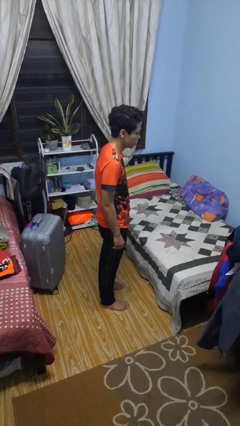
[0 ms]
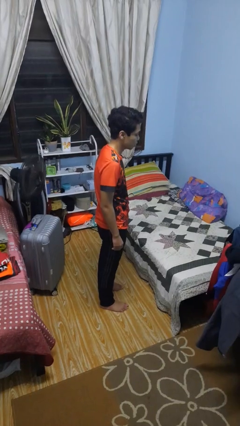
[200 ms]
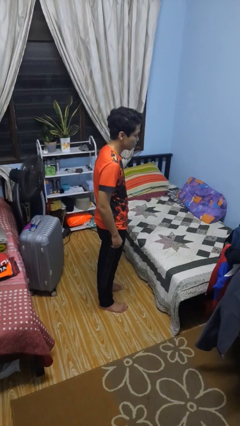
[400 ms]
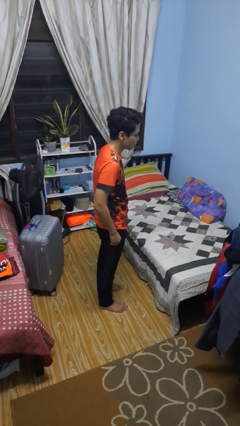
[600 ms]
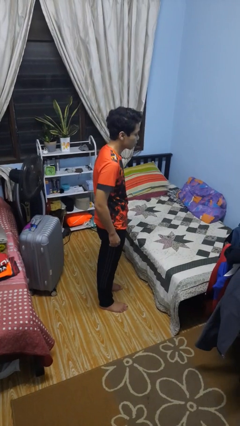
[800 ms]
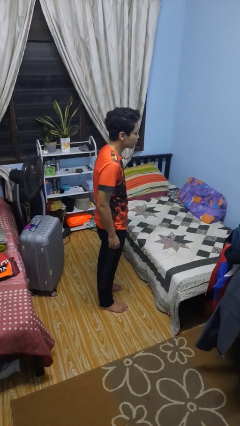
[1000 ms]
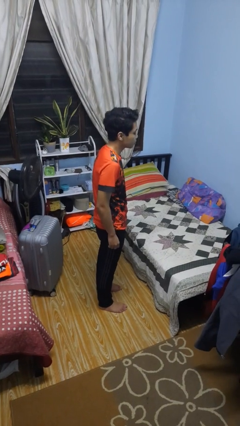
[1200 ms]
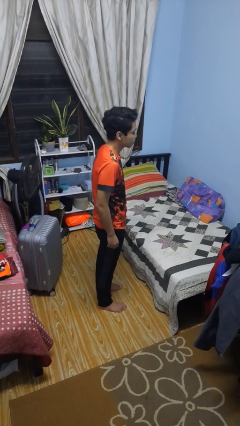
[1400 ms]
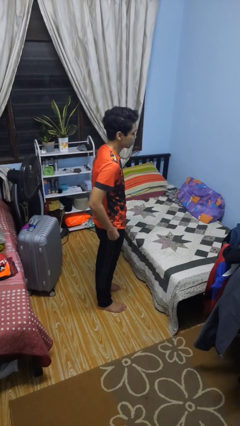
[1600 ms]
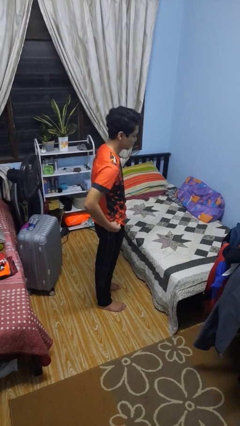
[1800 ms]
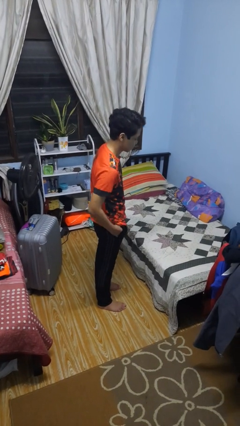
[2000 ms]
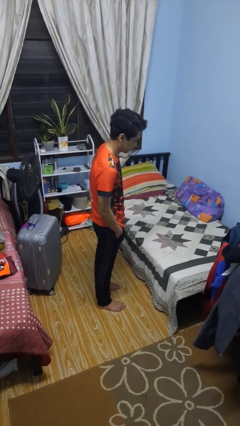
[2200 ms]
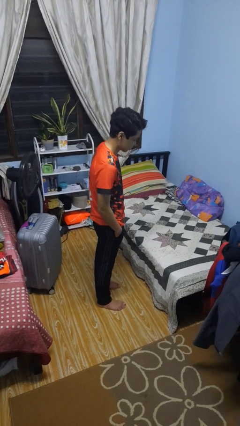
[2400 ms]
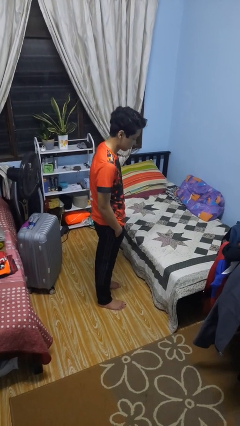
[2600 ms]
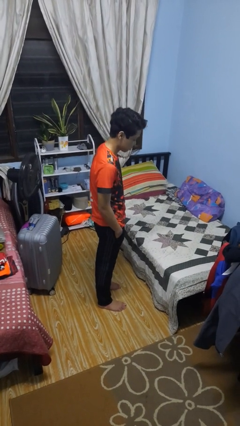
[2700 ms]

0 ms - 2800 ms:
person puts hands in back pockets

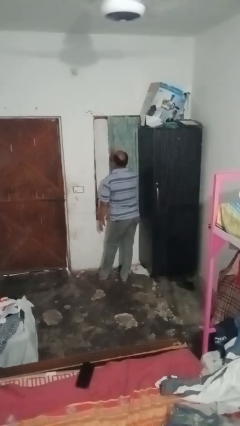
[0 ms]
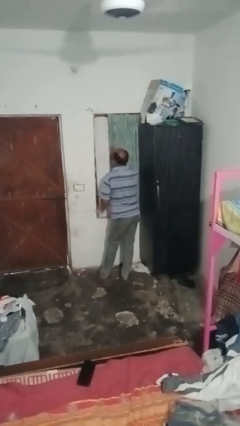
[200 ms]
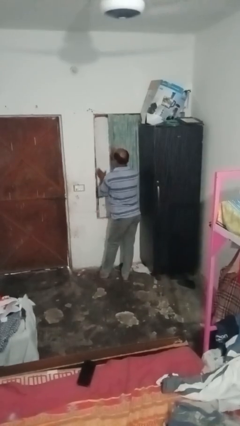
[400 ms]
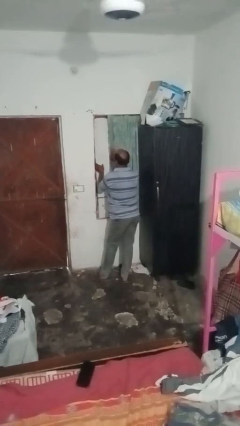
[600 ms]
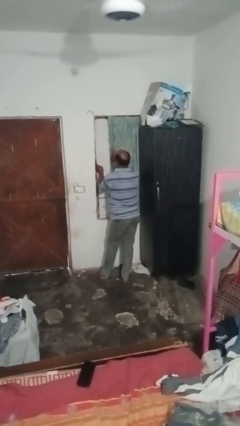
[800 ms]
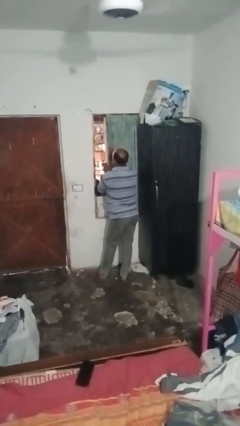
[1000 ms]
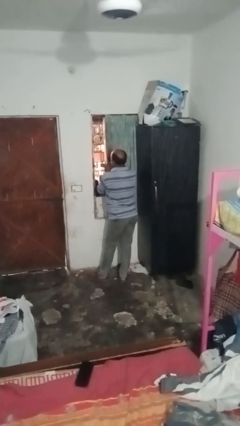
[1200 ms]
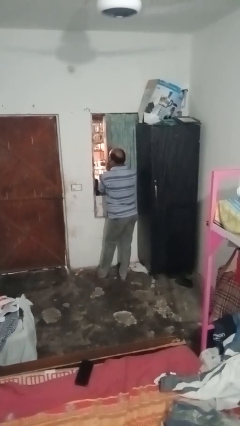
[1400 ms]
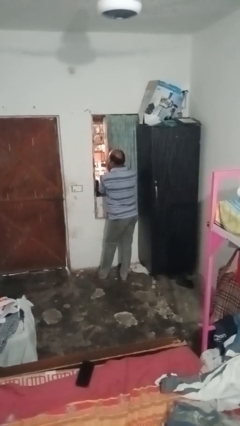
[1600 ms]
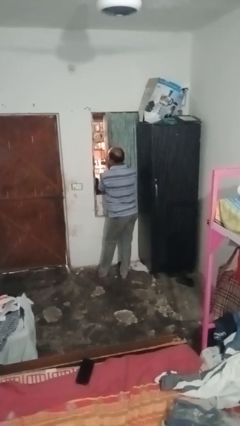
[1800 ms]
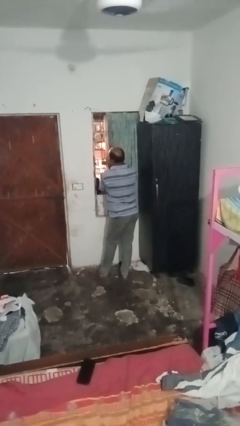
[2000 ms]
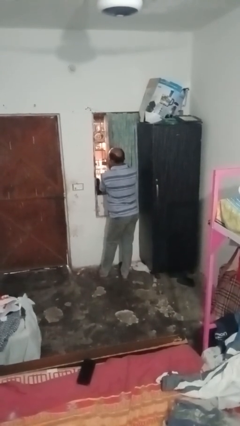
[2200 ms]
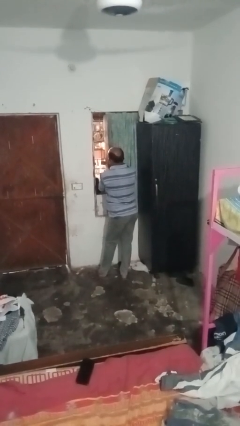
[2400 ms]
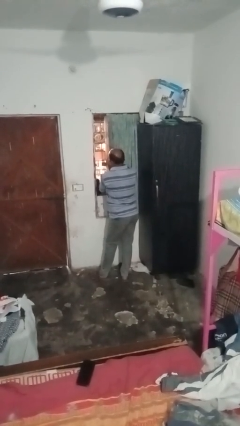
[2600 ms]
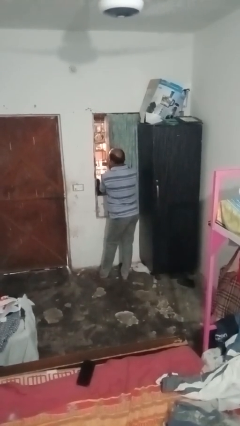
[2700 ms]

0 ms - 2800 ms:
person opens home window

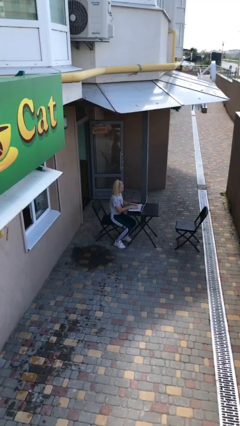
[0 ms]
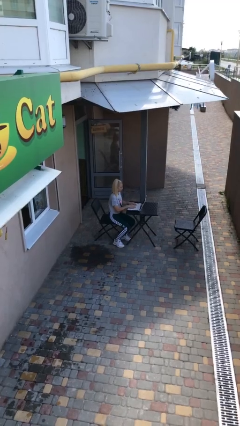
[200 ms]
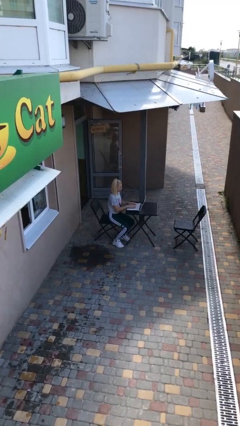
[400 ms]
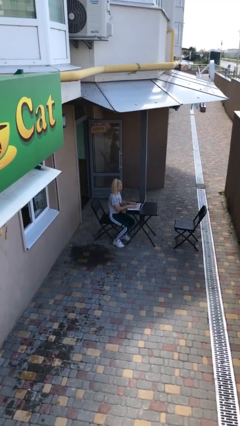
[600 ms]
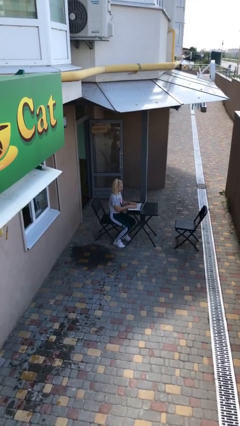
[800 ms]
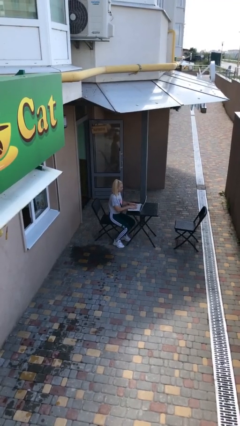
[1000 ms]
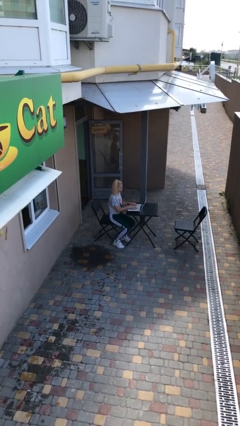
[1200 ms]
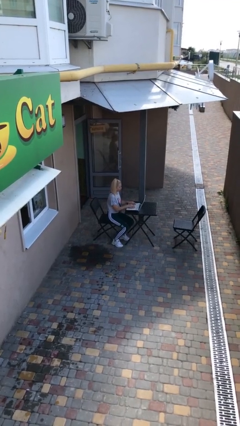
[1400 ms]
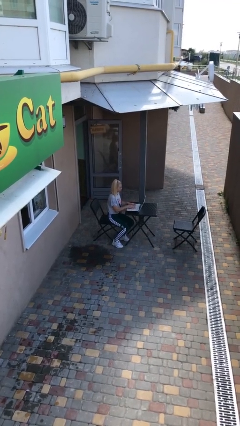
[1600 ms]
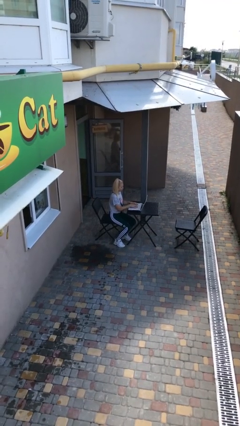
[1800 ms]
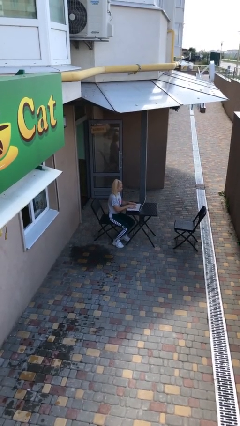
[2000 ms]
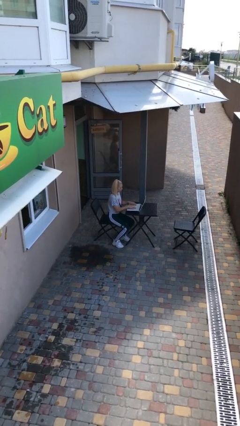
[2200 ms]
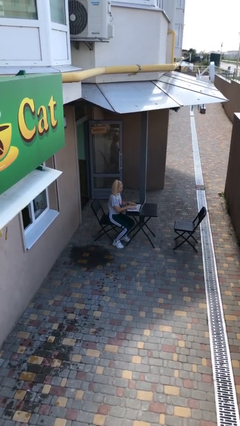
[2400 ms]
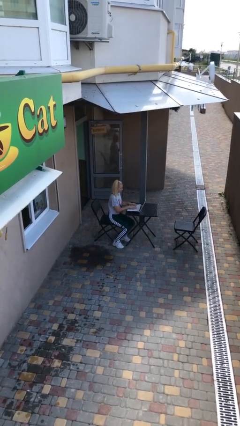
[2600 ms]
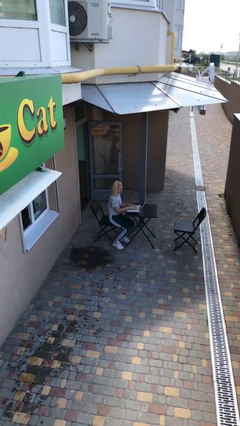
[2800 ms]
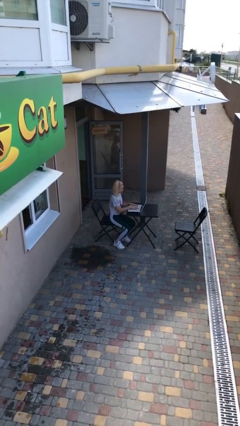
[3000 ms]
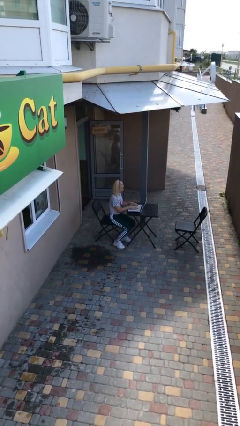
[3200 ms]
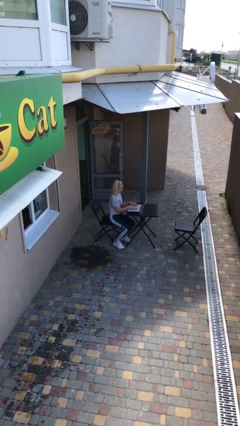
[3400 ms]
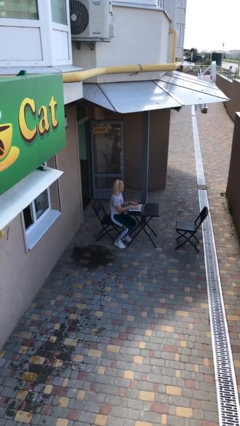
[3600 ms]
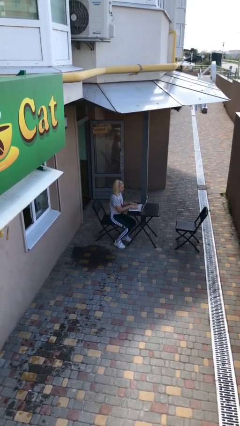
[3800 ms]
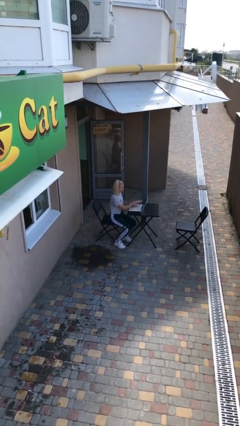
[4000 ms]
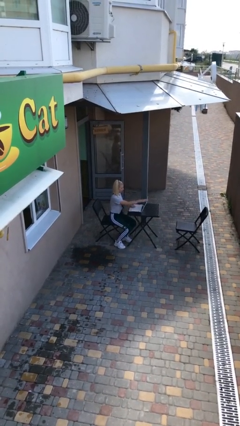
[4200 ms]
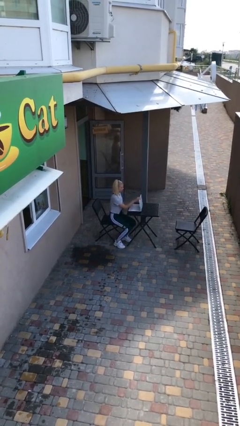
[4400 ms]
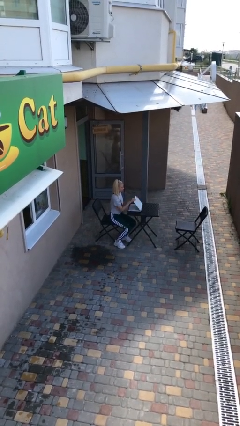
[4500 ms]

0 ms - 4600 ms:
person interacts with laptop

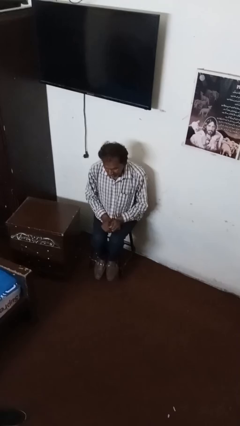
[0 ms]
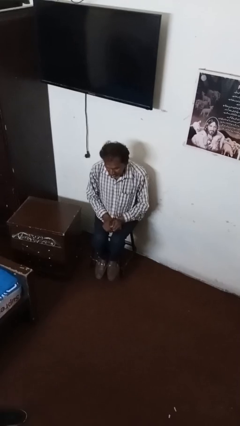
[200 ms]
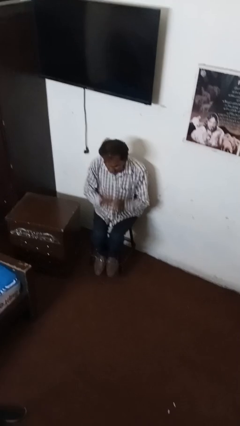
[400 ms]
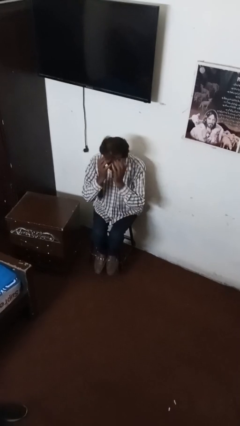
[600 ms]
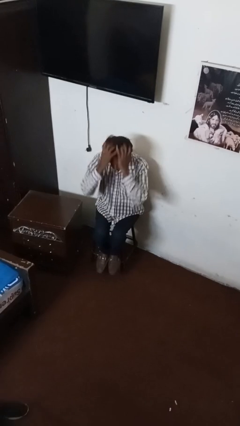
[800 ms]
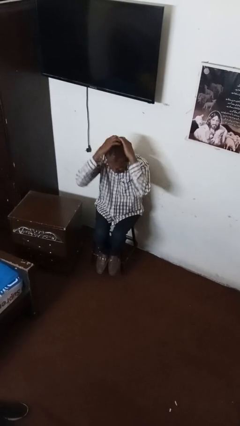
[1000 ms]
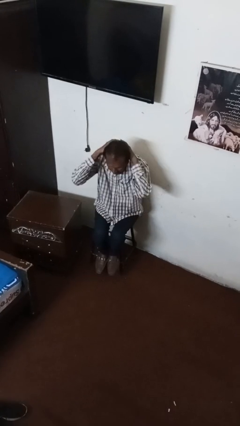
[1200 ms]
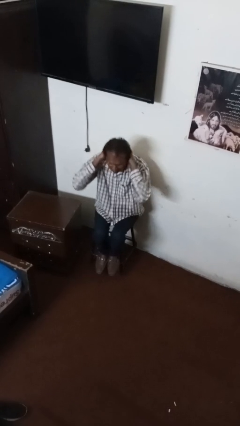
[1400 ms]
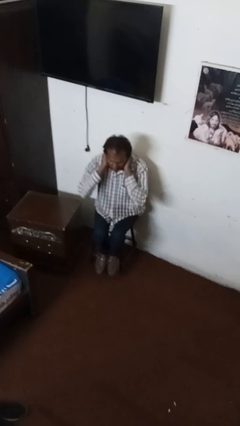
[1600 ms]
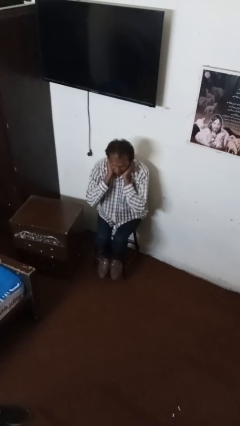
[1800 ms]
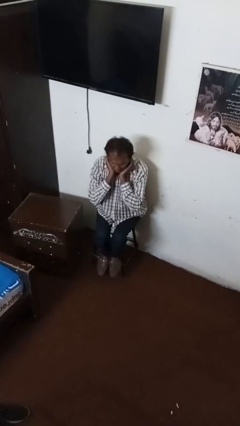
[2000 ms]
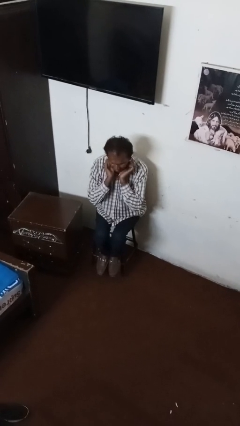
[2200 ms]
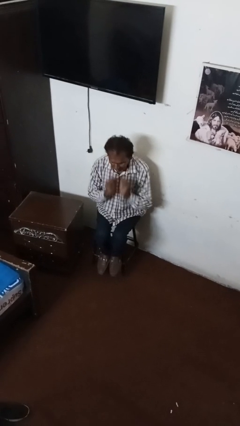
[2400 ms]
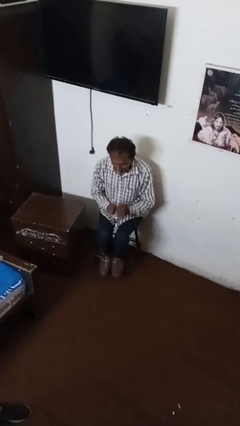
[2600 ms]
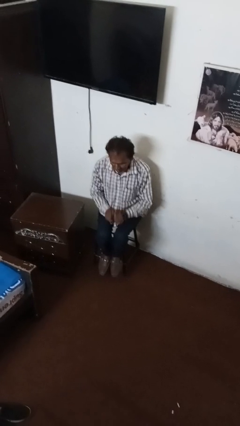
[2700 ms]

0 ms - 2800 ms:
person strokes hair

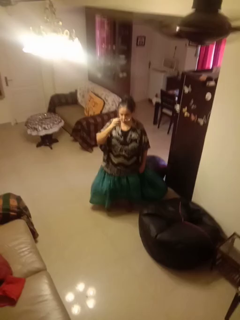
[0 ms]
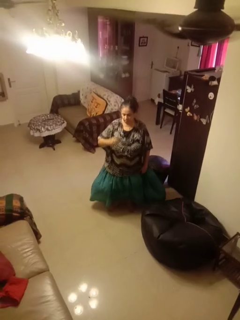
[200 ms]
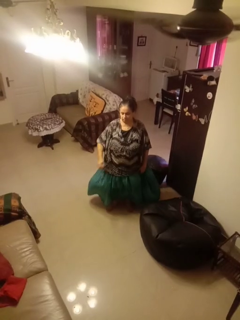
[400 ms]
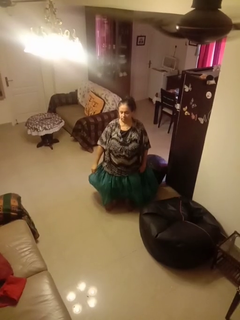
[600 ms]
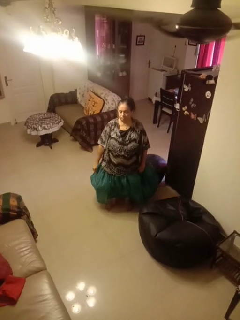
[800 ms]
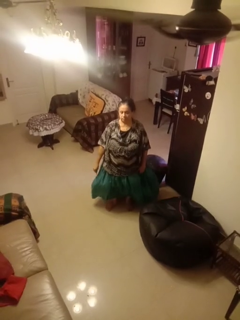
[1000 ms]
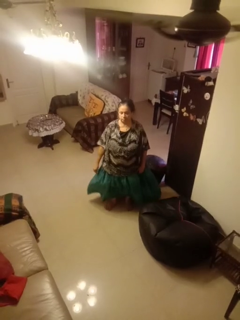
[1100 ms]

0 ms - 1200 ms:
person takes off glasses

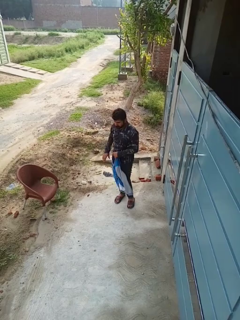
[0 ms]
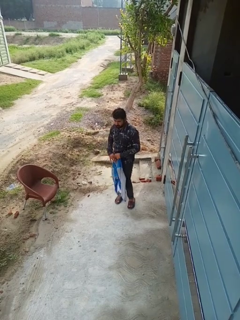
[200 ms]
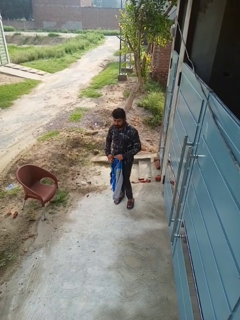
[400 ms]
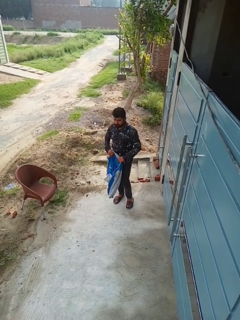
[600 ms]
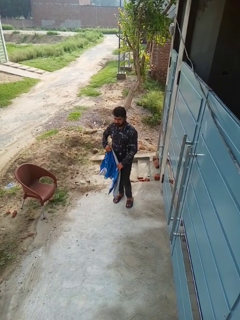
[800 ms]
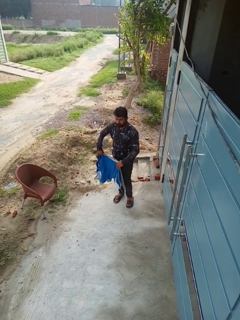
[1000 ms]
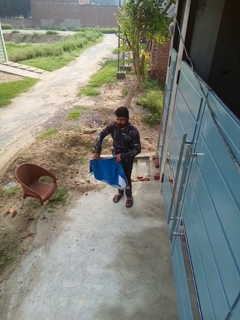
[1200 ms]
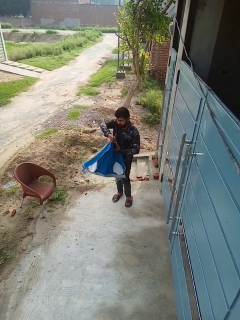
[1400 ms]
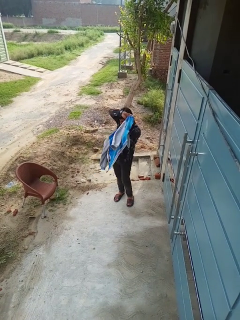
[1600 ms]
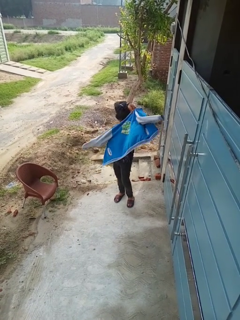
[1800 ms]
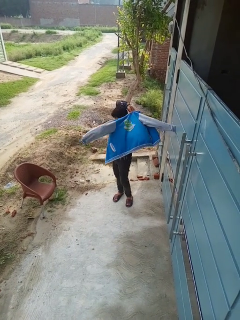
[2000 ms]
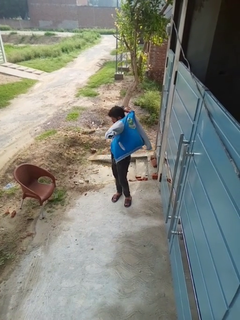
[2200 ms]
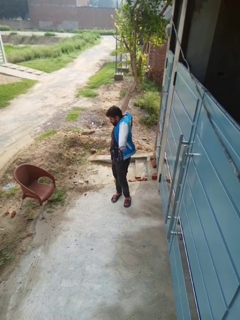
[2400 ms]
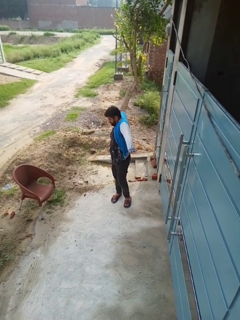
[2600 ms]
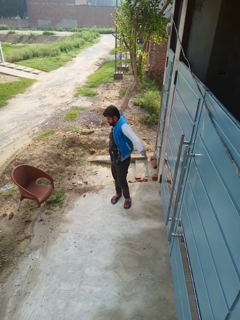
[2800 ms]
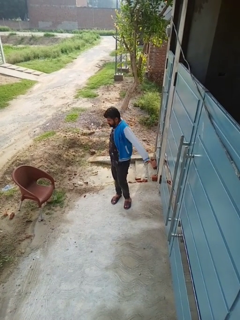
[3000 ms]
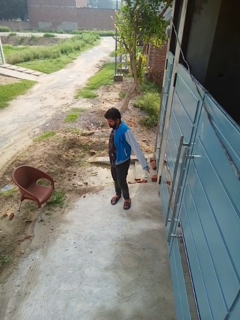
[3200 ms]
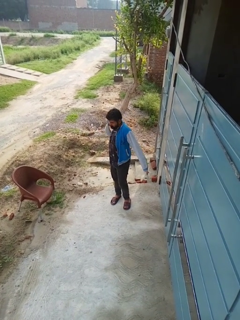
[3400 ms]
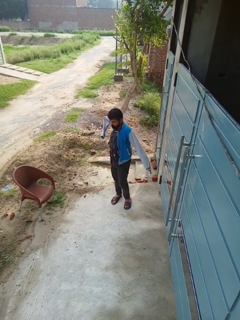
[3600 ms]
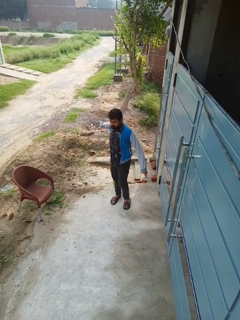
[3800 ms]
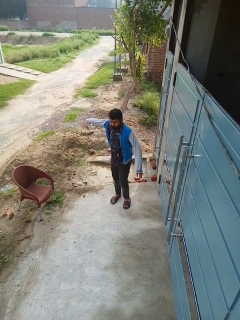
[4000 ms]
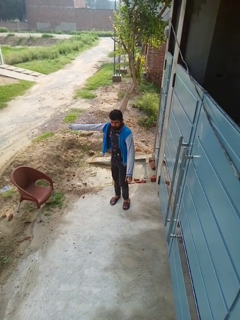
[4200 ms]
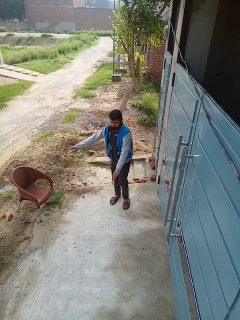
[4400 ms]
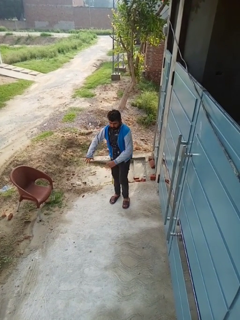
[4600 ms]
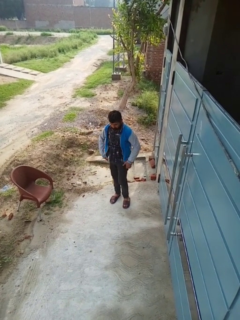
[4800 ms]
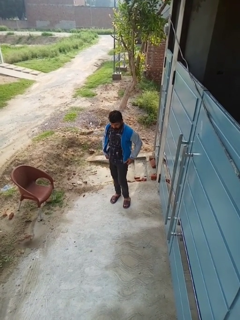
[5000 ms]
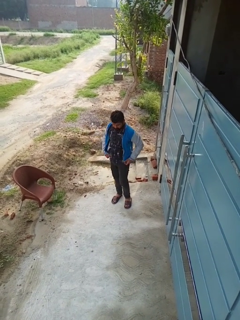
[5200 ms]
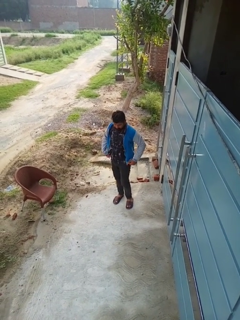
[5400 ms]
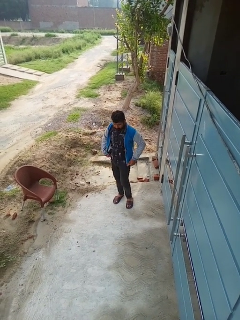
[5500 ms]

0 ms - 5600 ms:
person puts on jacket
